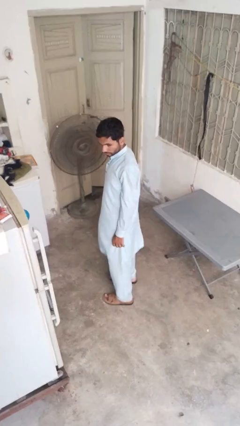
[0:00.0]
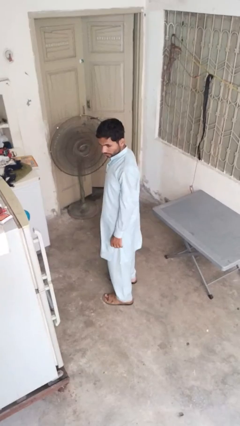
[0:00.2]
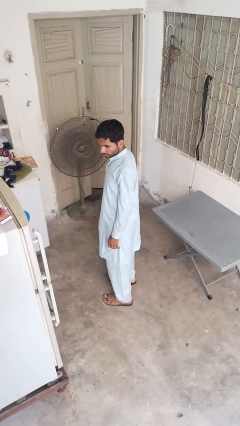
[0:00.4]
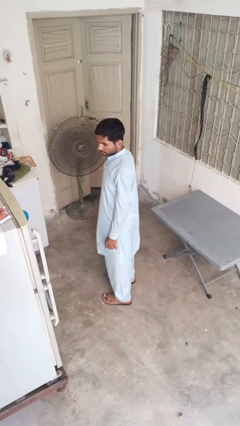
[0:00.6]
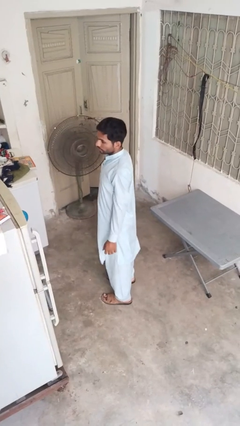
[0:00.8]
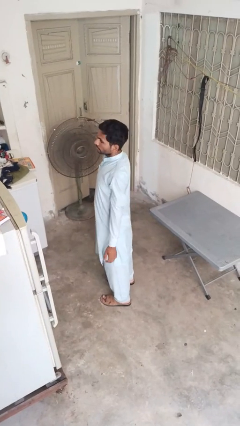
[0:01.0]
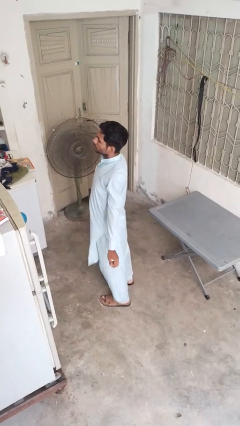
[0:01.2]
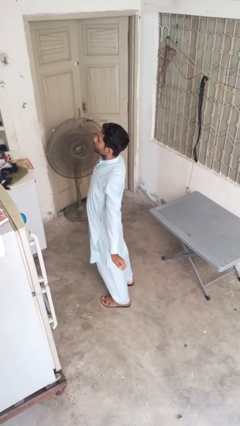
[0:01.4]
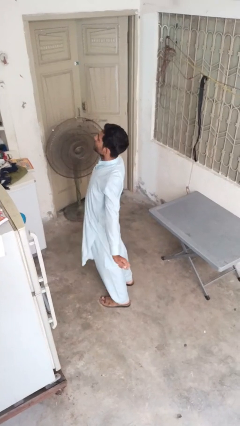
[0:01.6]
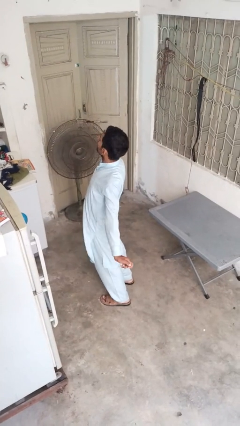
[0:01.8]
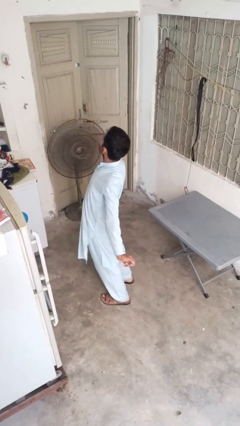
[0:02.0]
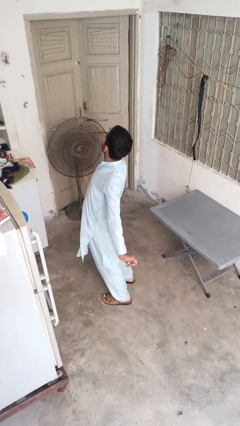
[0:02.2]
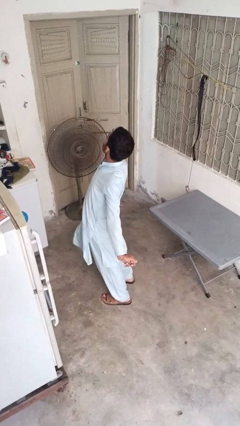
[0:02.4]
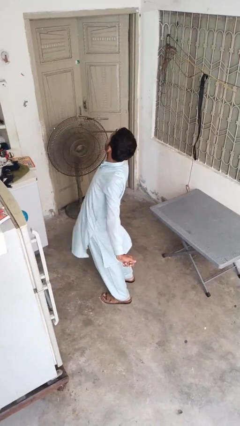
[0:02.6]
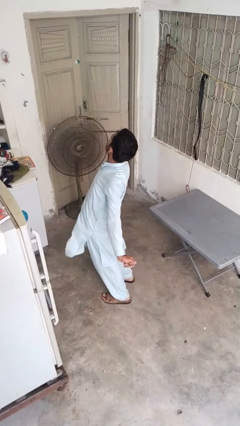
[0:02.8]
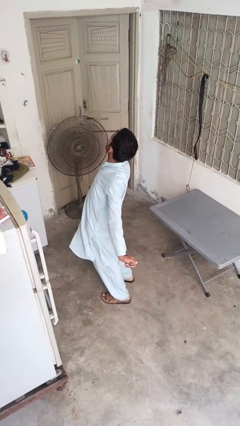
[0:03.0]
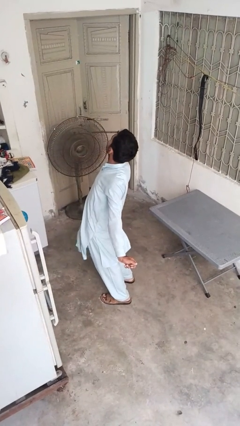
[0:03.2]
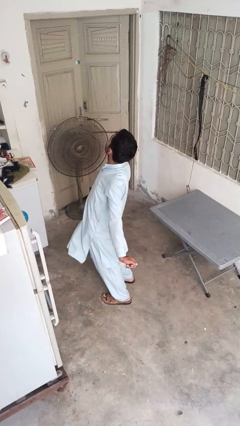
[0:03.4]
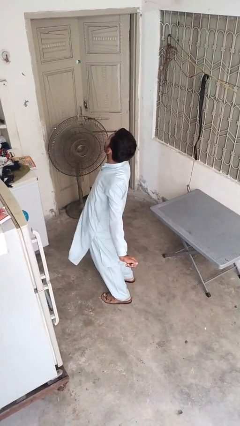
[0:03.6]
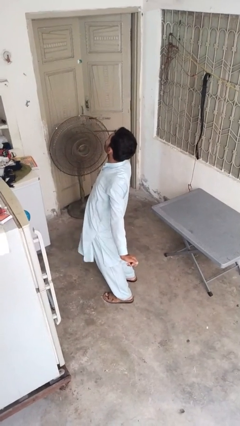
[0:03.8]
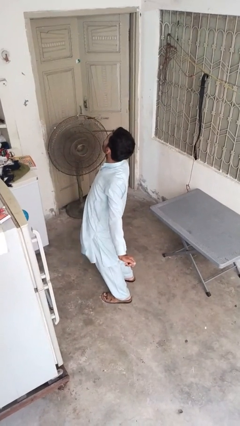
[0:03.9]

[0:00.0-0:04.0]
person stretches back

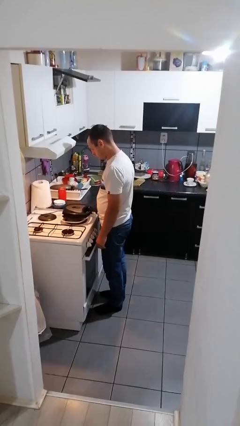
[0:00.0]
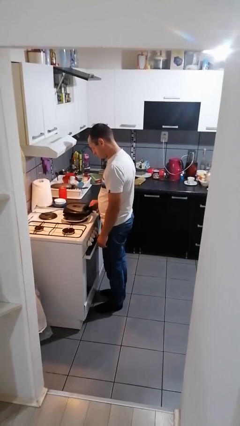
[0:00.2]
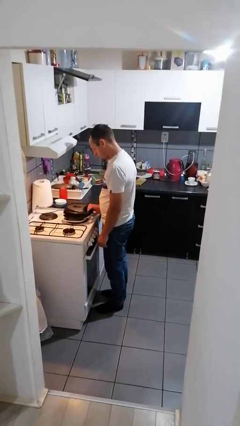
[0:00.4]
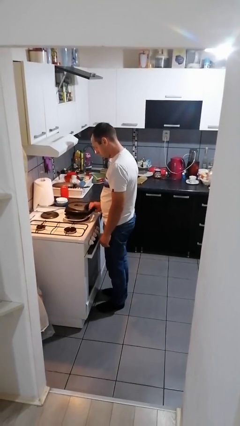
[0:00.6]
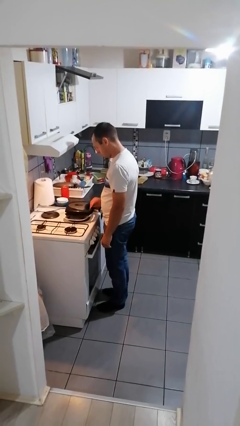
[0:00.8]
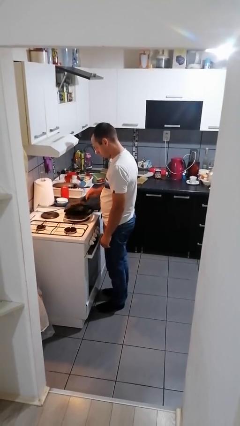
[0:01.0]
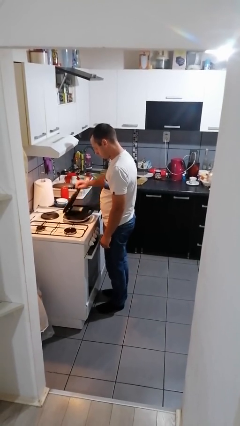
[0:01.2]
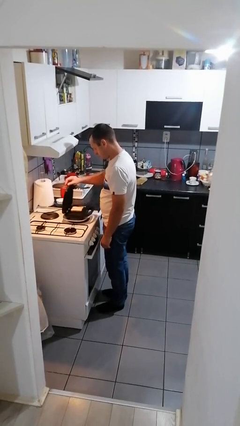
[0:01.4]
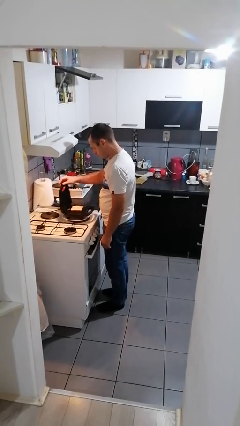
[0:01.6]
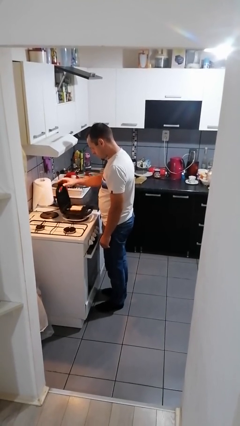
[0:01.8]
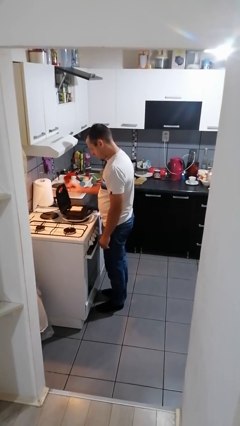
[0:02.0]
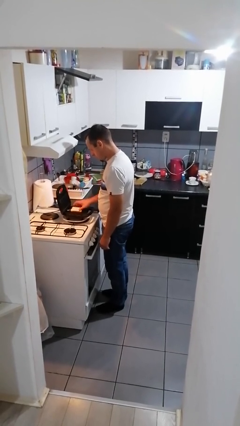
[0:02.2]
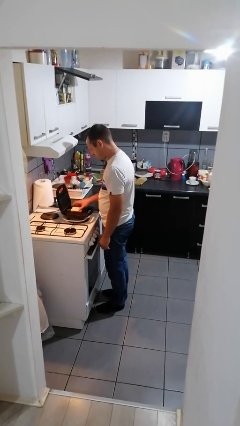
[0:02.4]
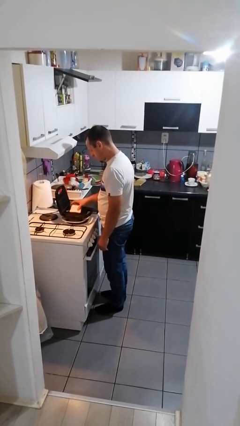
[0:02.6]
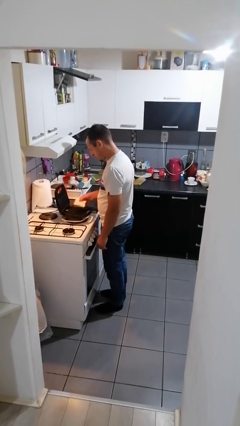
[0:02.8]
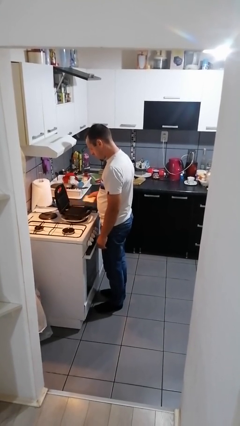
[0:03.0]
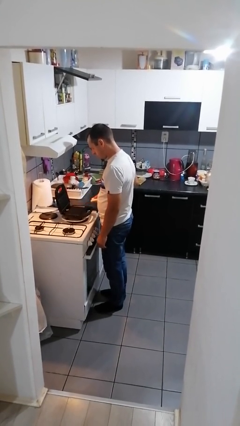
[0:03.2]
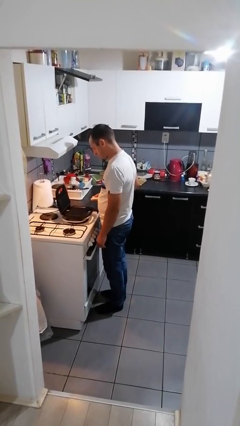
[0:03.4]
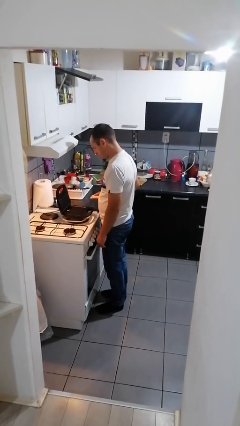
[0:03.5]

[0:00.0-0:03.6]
person takes object from toaster

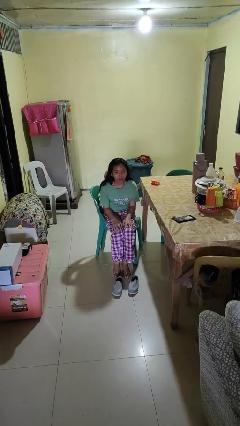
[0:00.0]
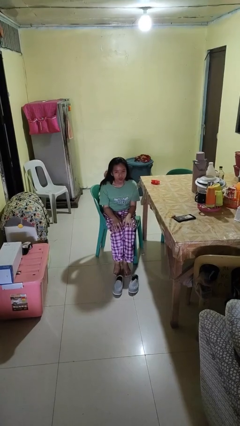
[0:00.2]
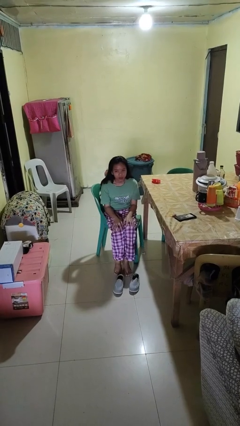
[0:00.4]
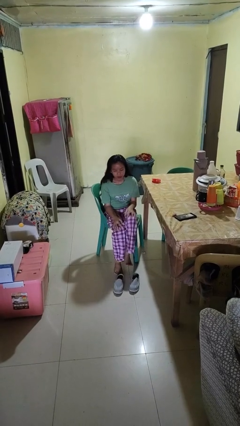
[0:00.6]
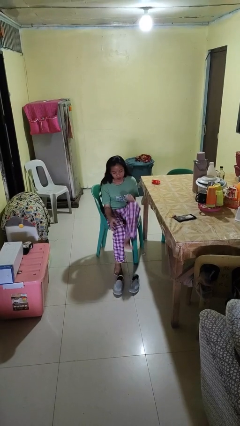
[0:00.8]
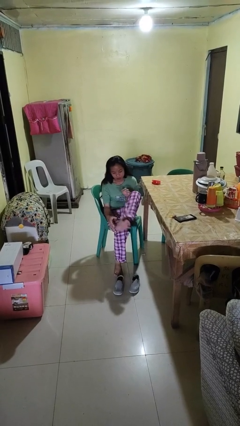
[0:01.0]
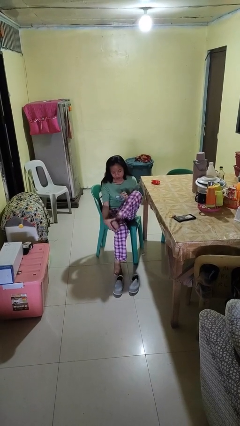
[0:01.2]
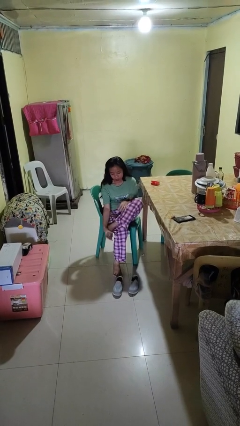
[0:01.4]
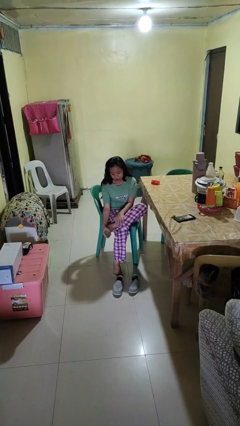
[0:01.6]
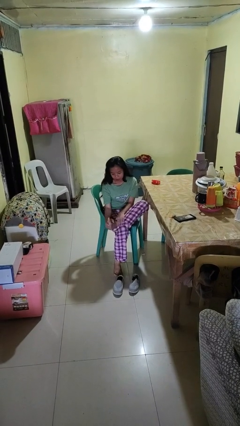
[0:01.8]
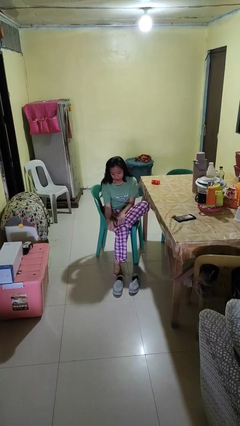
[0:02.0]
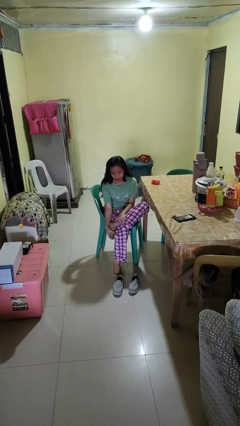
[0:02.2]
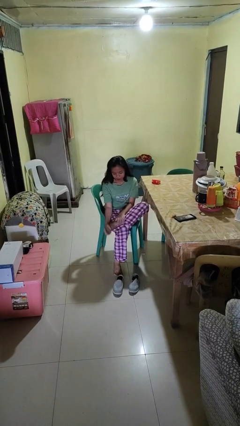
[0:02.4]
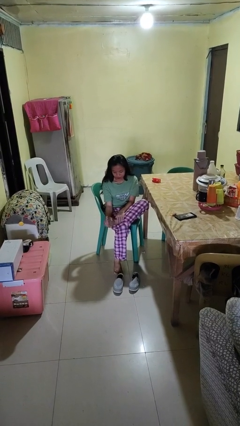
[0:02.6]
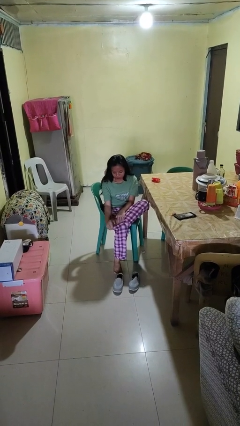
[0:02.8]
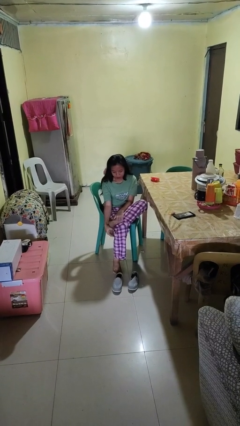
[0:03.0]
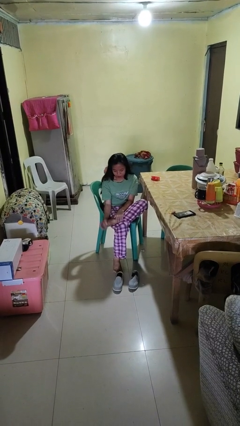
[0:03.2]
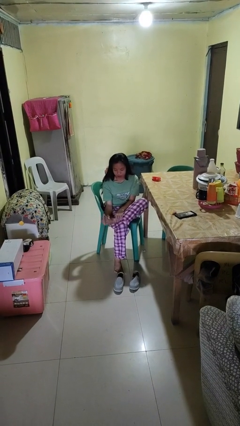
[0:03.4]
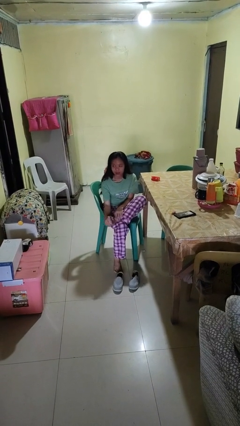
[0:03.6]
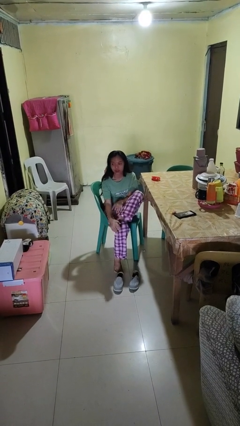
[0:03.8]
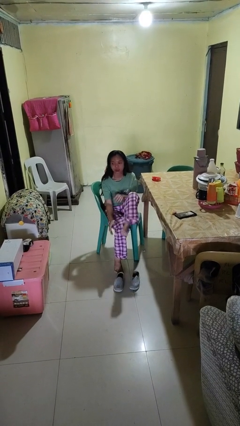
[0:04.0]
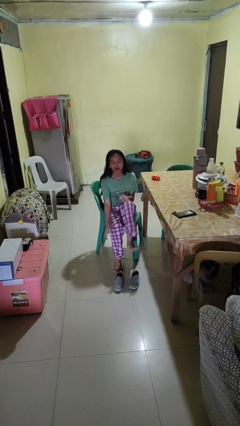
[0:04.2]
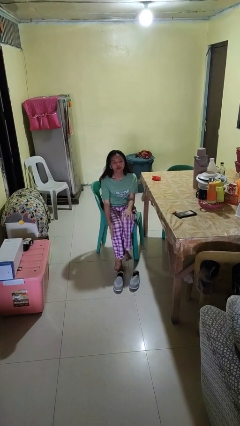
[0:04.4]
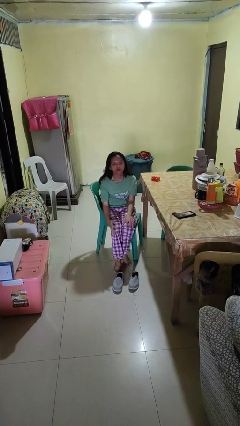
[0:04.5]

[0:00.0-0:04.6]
person rubs foot

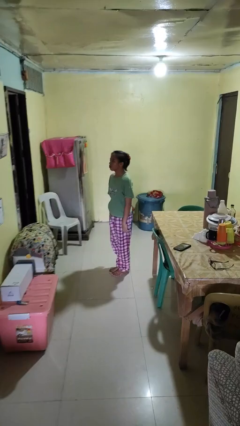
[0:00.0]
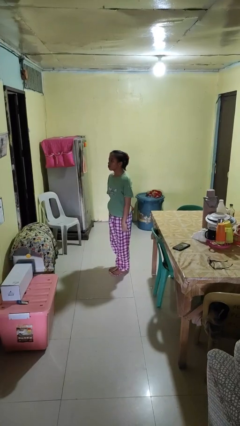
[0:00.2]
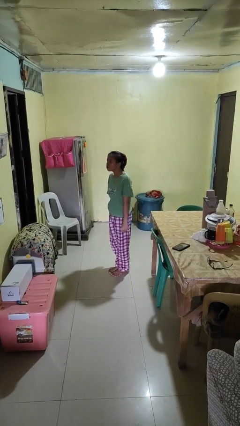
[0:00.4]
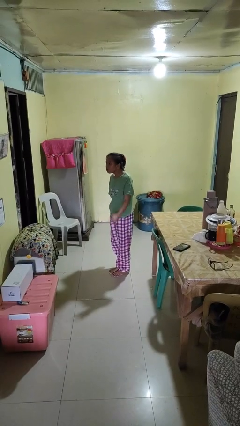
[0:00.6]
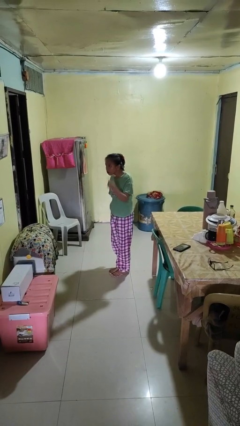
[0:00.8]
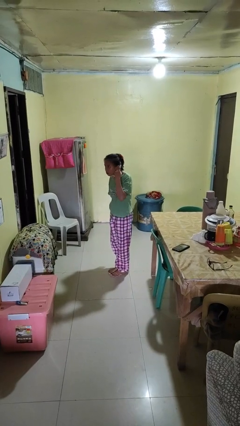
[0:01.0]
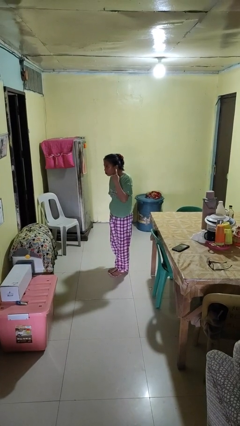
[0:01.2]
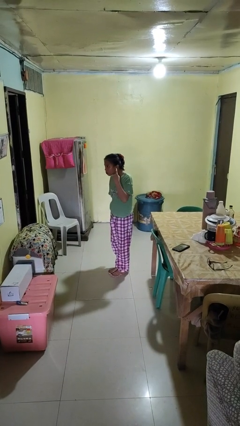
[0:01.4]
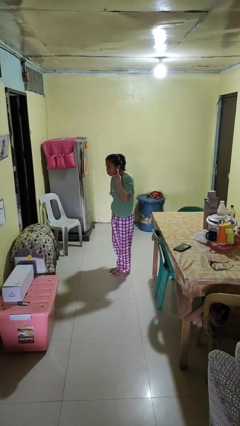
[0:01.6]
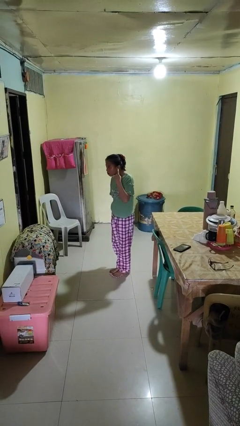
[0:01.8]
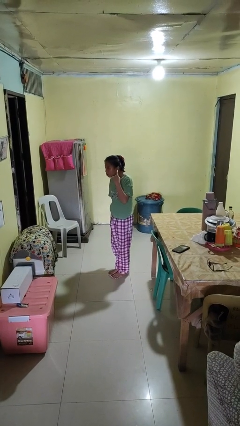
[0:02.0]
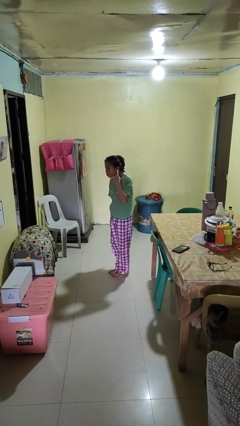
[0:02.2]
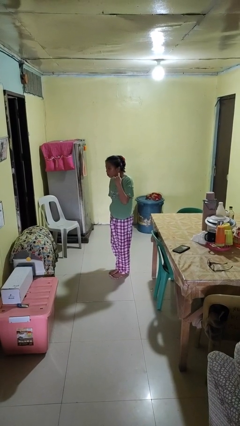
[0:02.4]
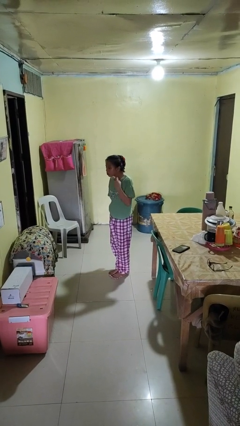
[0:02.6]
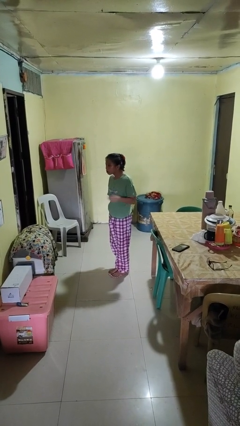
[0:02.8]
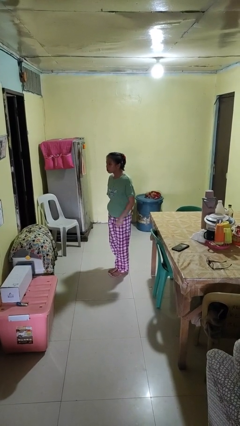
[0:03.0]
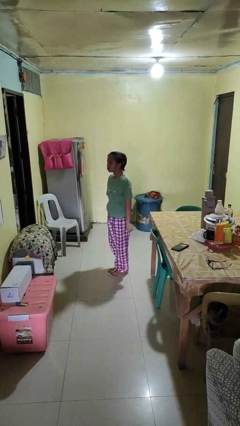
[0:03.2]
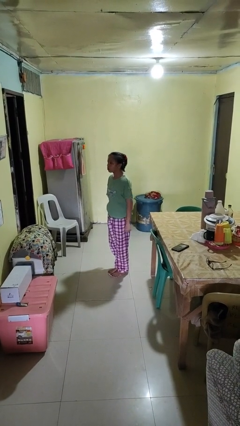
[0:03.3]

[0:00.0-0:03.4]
person gestures listen closely

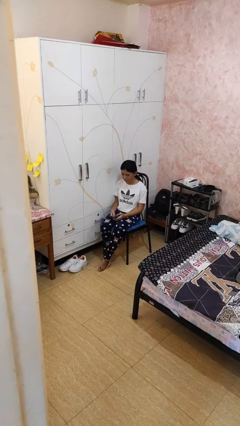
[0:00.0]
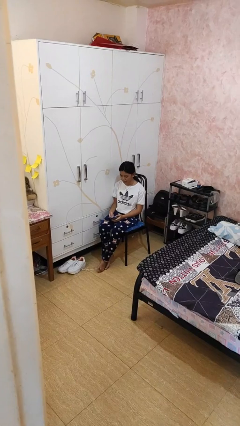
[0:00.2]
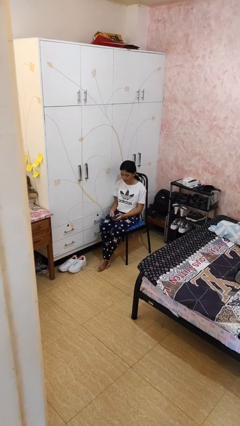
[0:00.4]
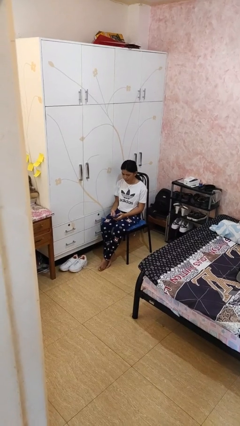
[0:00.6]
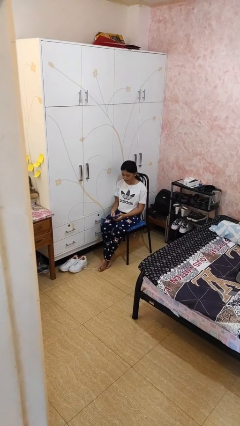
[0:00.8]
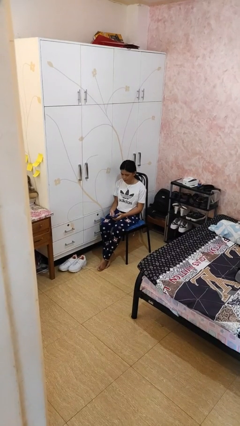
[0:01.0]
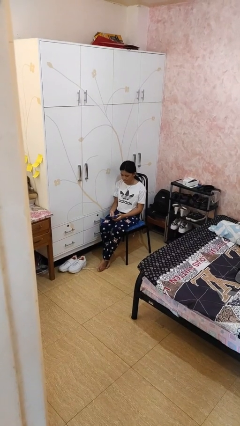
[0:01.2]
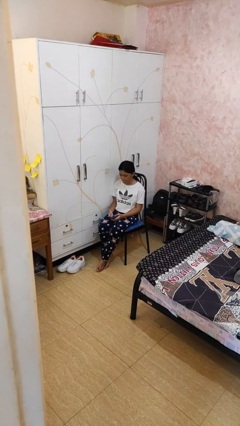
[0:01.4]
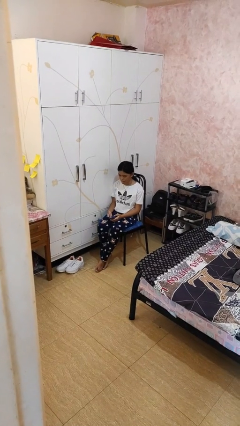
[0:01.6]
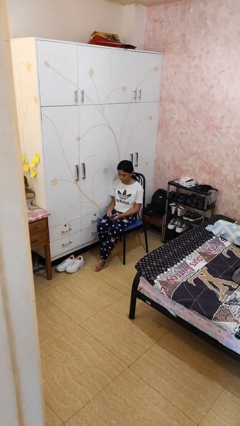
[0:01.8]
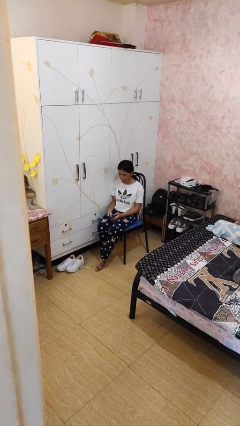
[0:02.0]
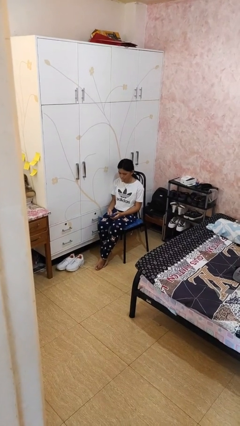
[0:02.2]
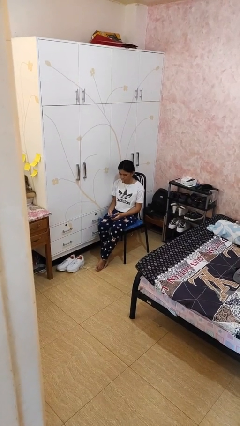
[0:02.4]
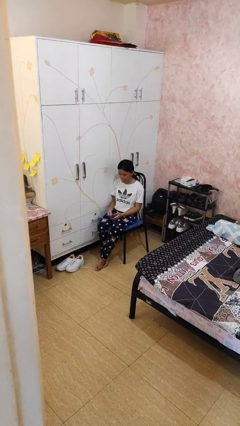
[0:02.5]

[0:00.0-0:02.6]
person sticks out tongue
